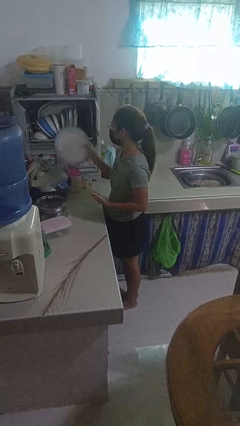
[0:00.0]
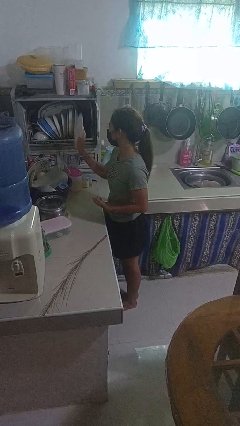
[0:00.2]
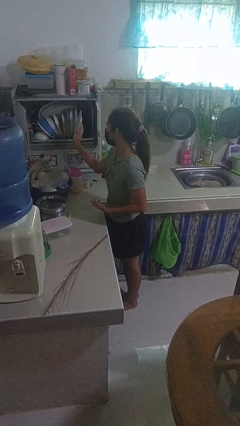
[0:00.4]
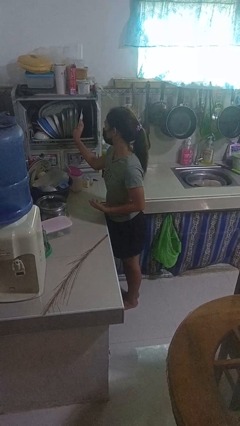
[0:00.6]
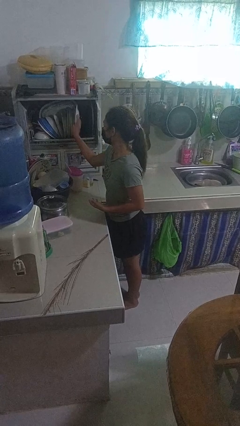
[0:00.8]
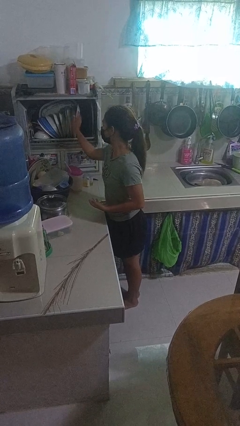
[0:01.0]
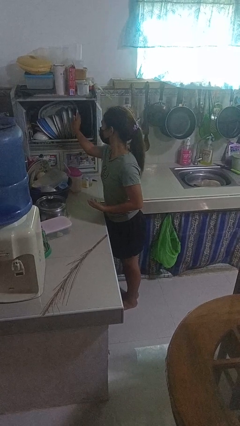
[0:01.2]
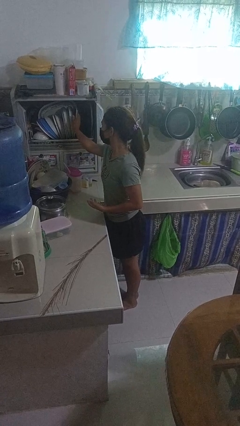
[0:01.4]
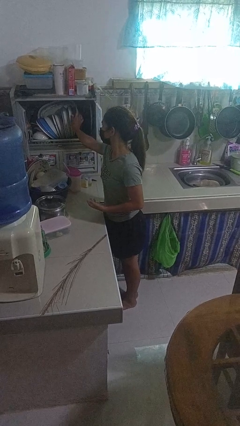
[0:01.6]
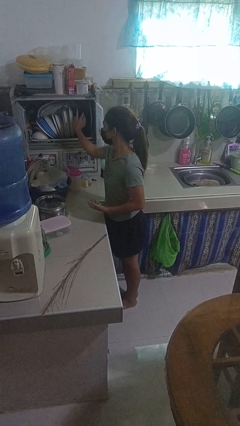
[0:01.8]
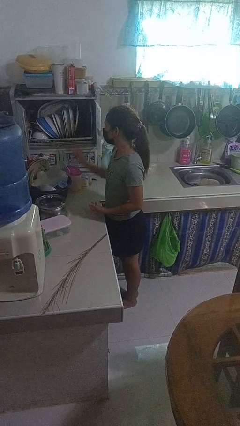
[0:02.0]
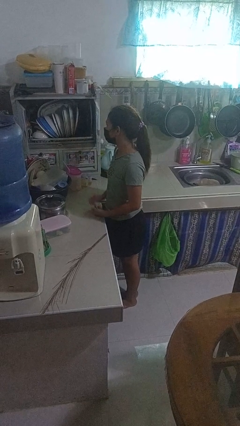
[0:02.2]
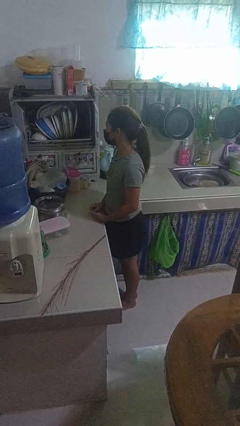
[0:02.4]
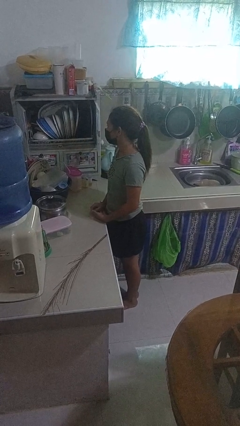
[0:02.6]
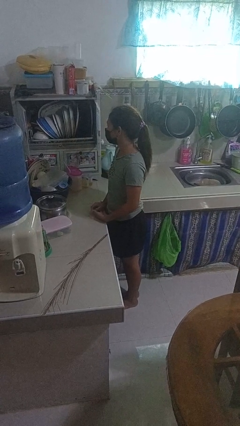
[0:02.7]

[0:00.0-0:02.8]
person puts object into kitchen drawer

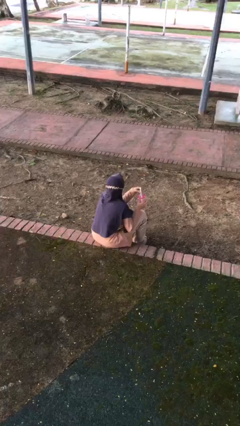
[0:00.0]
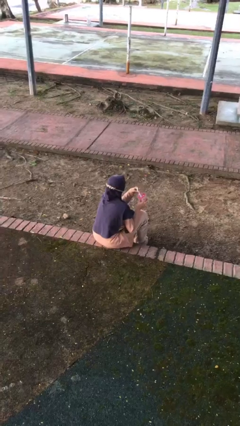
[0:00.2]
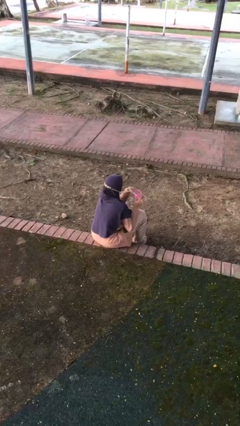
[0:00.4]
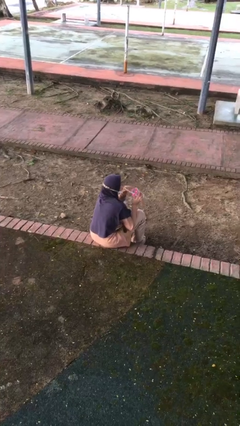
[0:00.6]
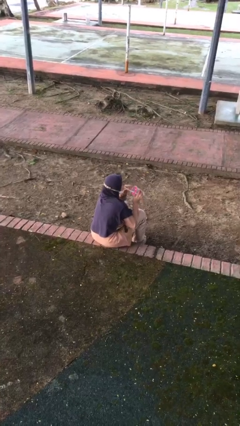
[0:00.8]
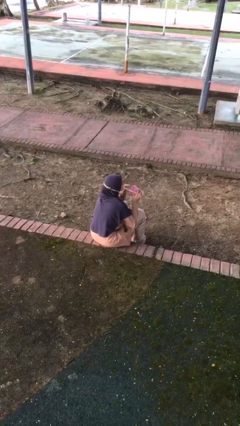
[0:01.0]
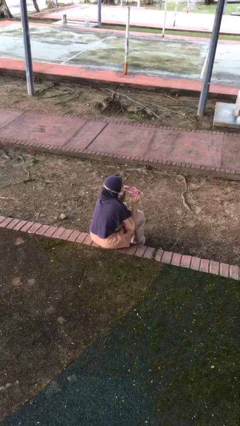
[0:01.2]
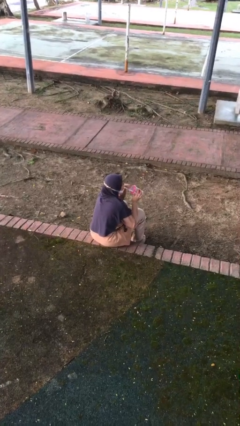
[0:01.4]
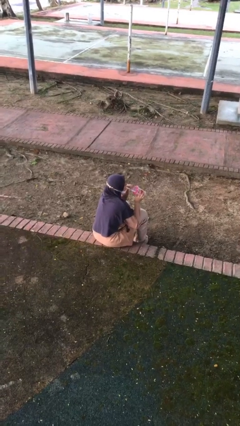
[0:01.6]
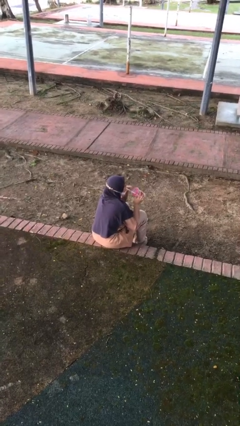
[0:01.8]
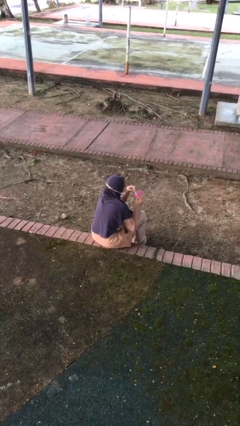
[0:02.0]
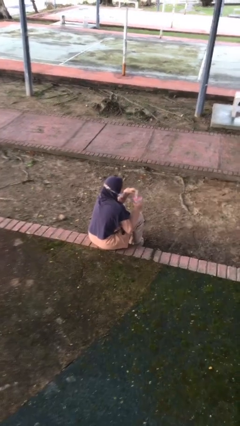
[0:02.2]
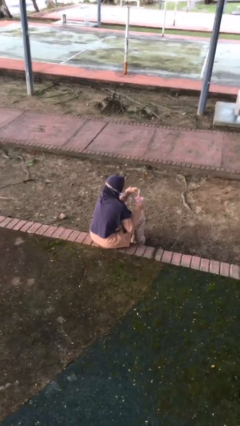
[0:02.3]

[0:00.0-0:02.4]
person drinks from straw

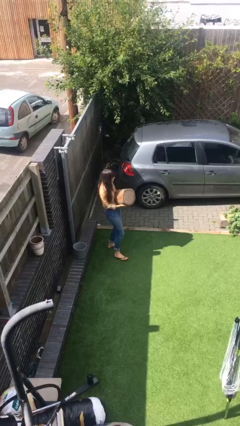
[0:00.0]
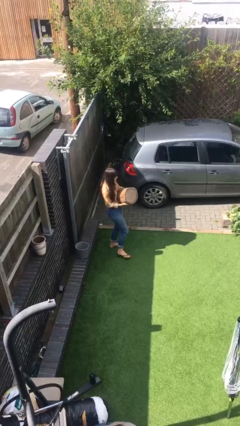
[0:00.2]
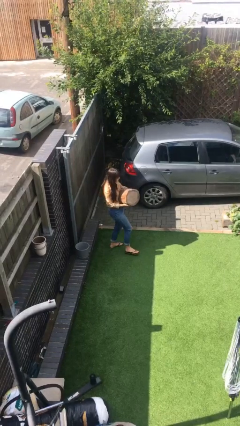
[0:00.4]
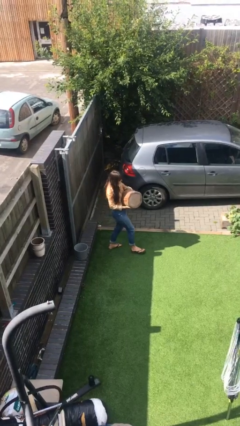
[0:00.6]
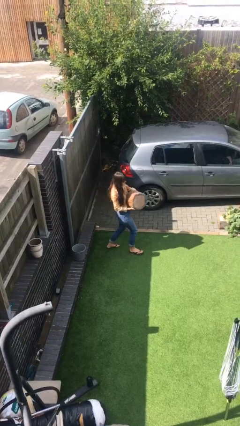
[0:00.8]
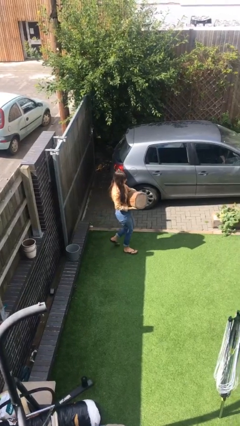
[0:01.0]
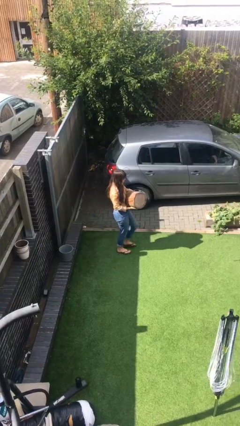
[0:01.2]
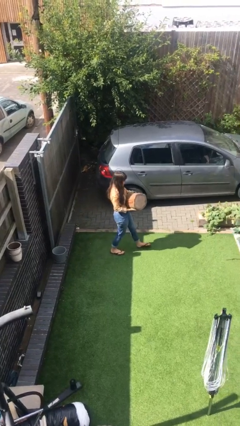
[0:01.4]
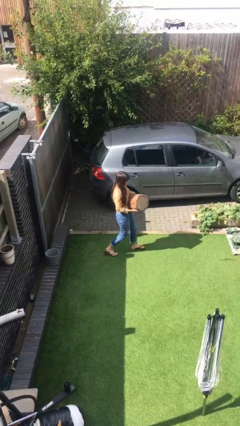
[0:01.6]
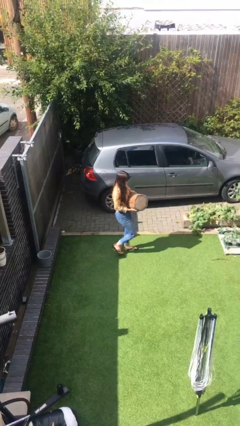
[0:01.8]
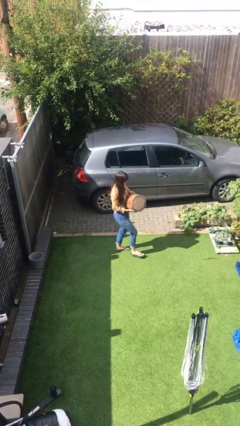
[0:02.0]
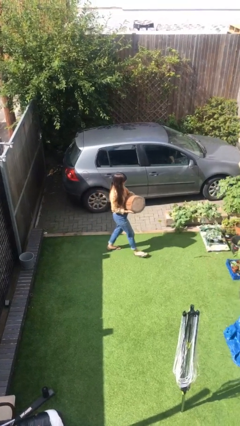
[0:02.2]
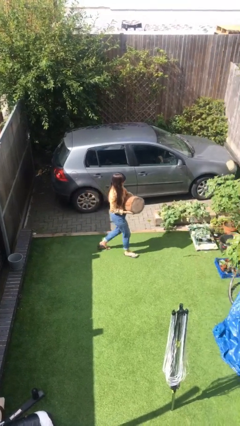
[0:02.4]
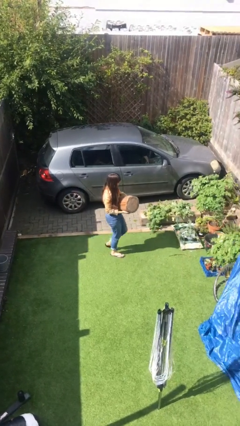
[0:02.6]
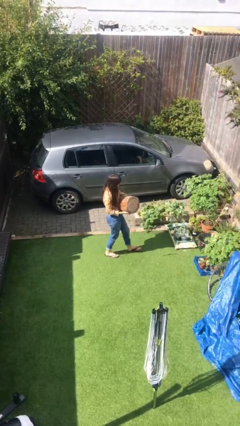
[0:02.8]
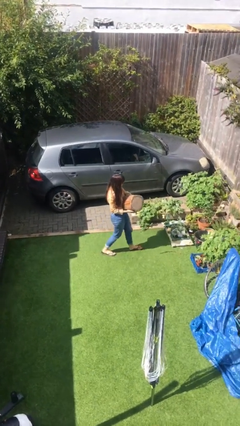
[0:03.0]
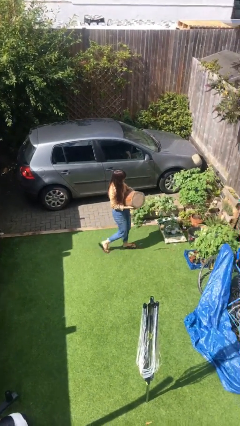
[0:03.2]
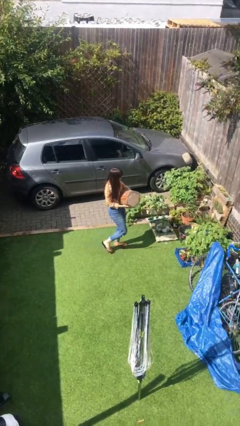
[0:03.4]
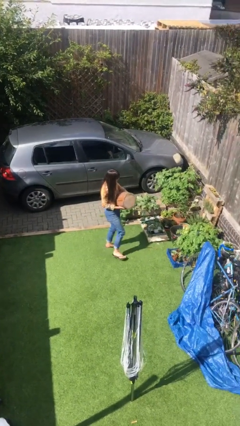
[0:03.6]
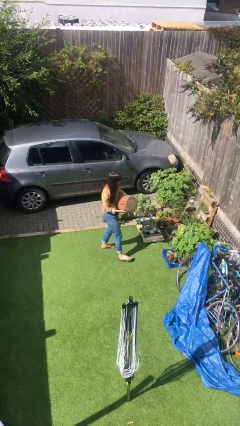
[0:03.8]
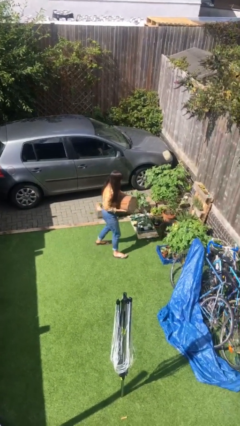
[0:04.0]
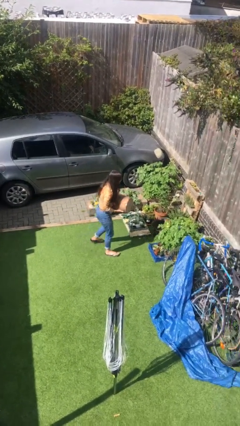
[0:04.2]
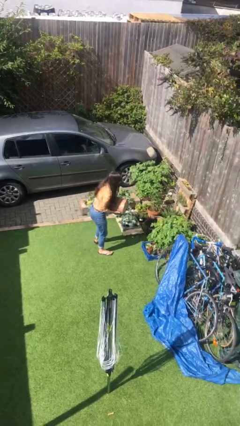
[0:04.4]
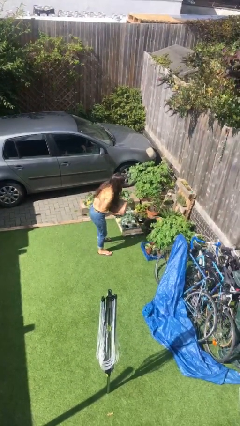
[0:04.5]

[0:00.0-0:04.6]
person carries heavy object

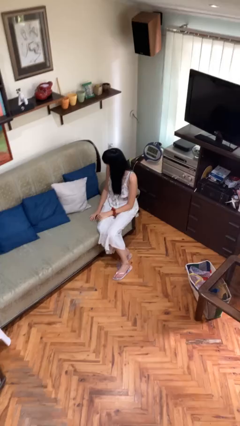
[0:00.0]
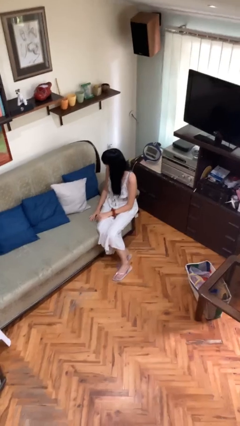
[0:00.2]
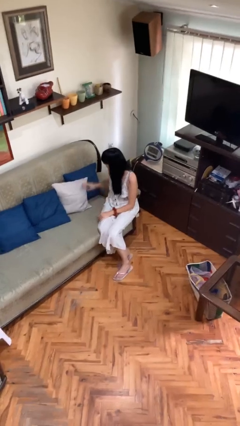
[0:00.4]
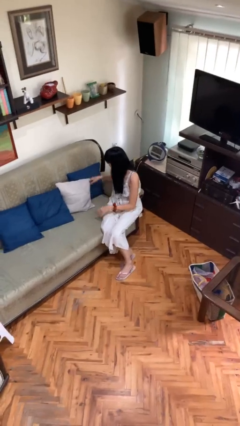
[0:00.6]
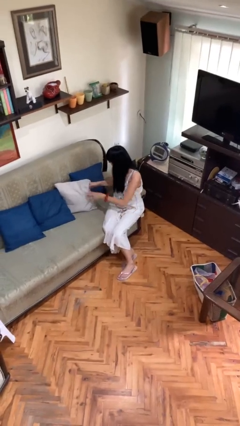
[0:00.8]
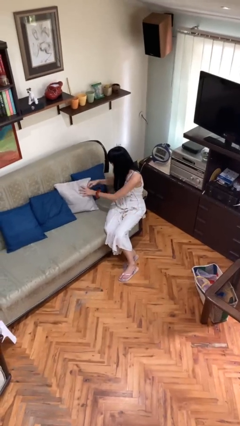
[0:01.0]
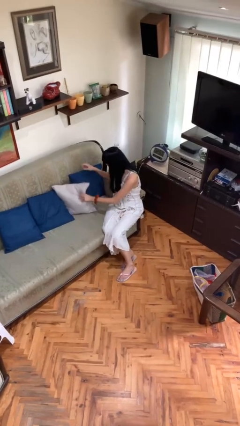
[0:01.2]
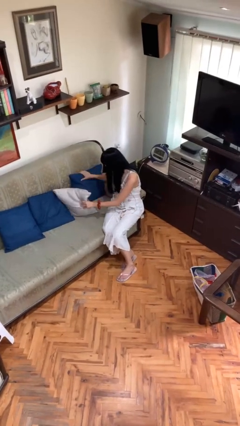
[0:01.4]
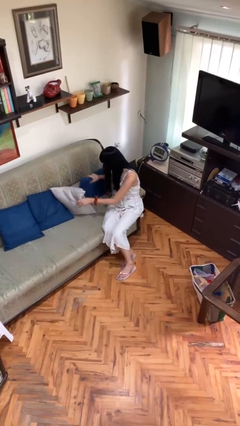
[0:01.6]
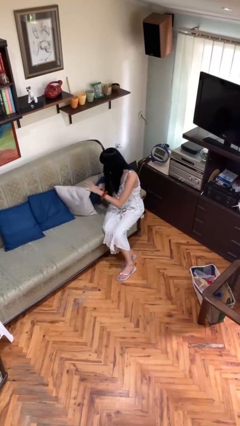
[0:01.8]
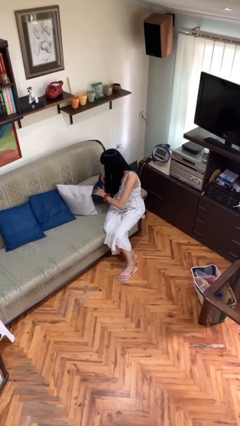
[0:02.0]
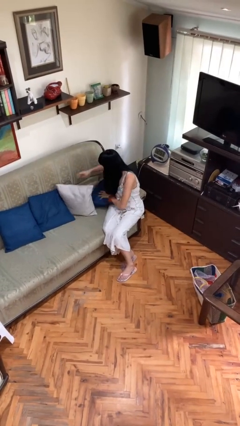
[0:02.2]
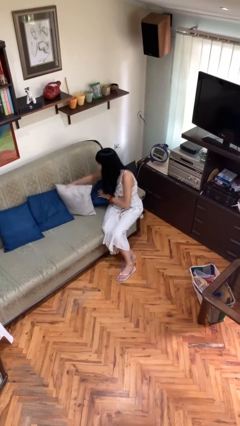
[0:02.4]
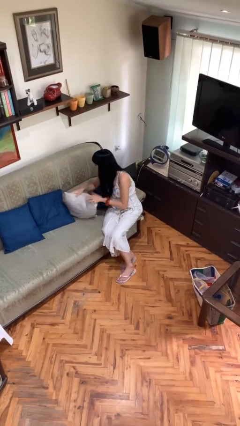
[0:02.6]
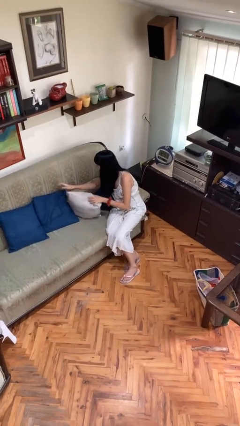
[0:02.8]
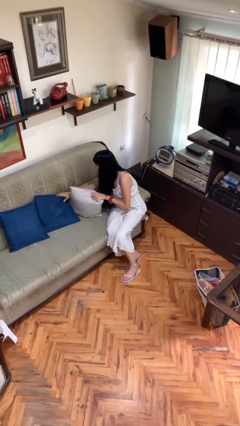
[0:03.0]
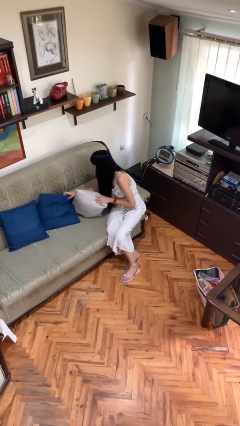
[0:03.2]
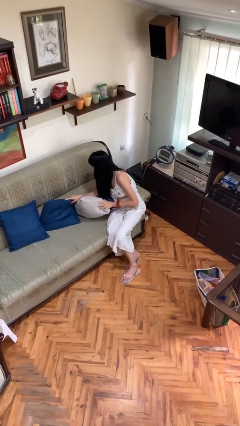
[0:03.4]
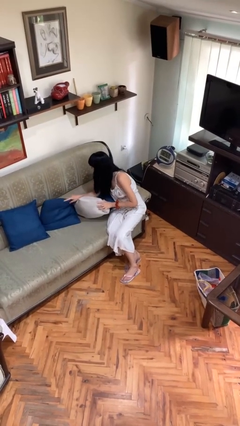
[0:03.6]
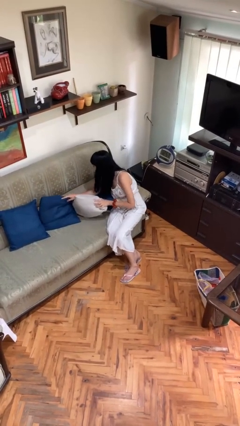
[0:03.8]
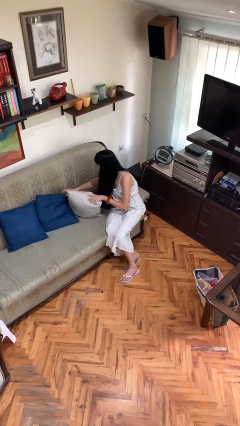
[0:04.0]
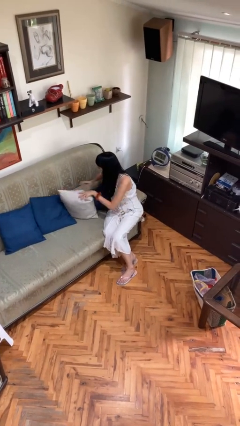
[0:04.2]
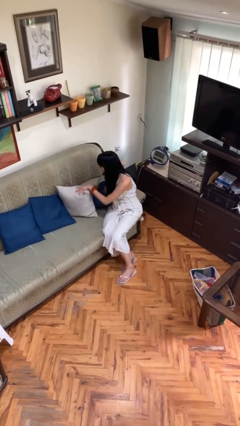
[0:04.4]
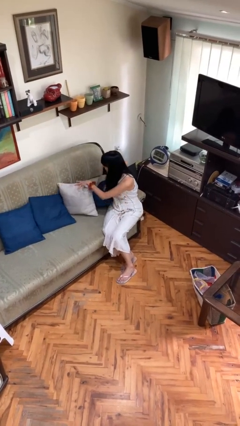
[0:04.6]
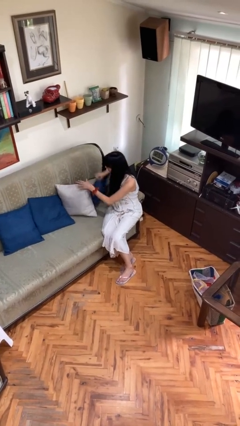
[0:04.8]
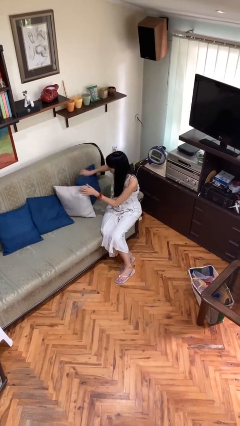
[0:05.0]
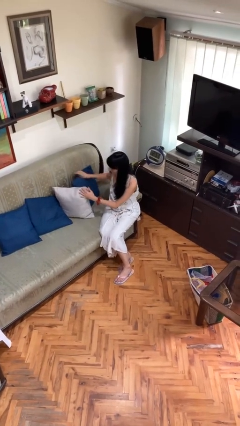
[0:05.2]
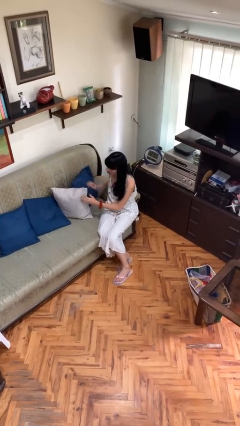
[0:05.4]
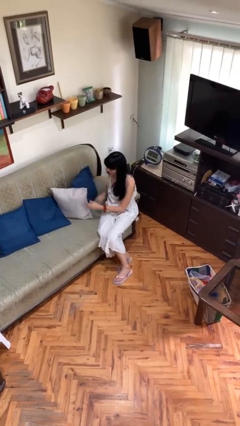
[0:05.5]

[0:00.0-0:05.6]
person searches in couch

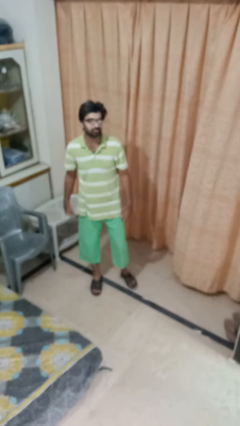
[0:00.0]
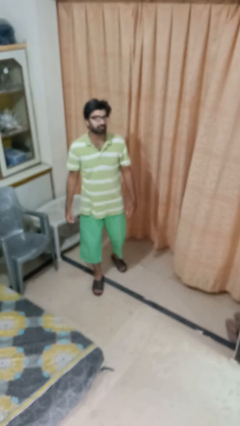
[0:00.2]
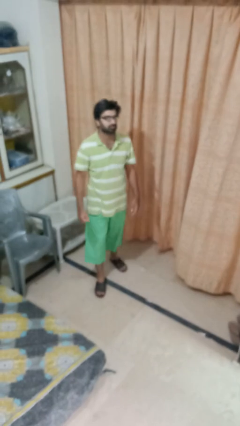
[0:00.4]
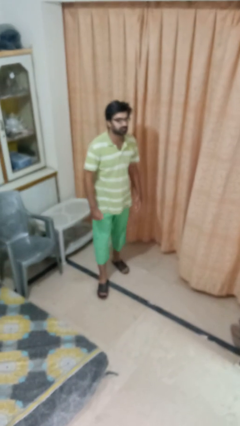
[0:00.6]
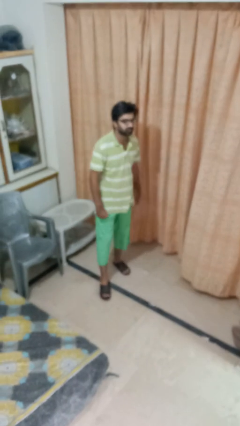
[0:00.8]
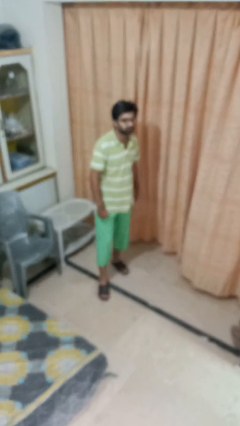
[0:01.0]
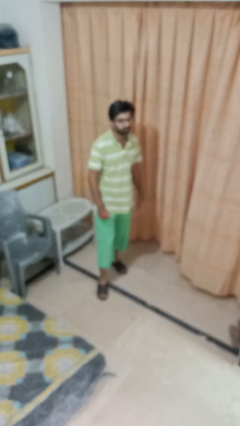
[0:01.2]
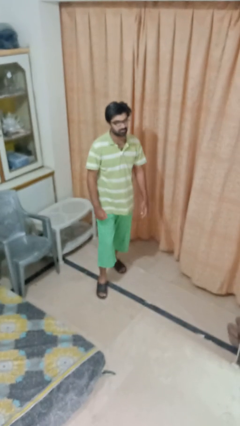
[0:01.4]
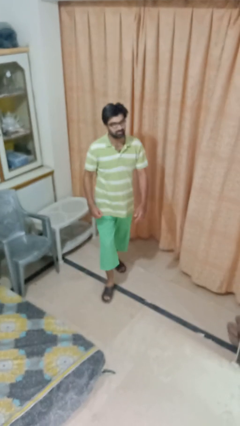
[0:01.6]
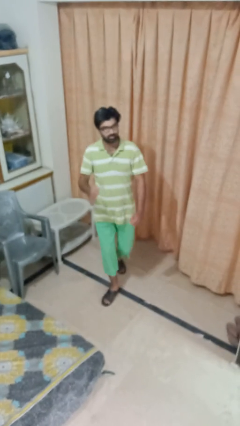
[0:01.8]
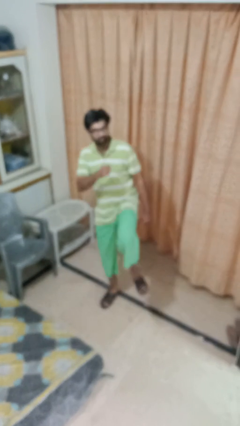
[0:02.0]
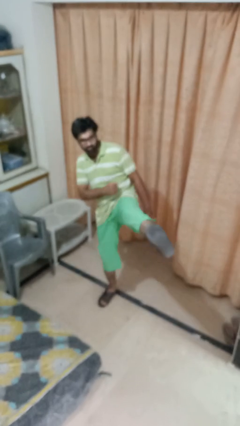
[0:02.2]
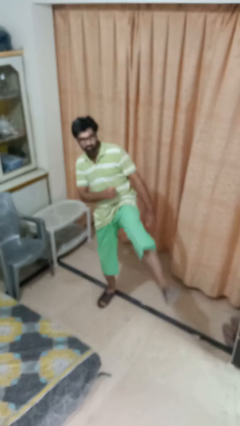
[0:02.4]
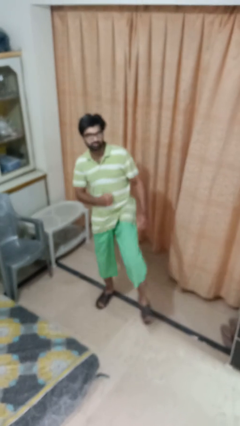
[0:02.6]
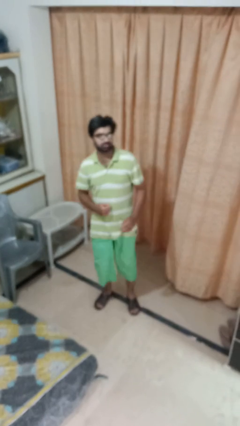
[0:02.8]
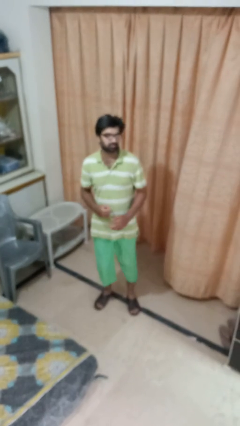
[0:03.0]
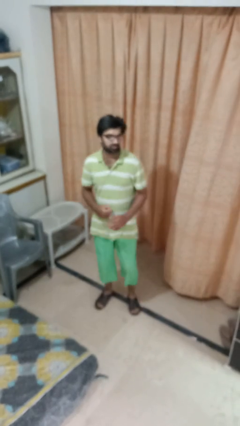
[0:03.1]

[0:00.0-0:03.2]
person karate kicks
